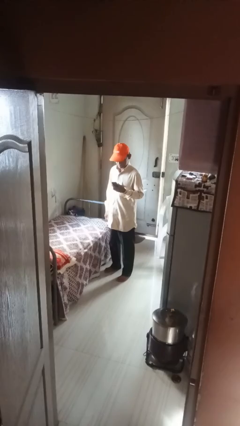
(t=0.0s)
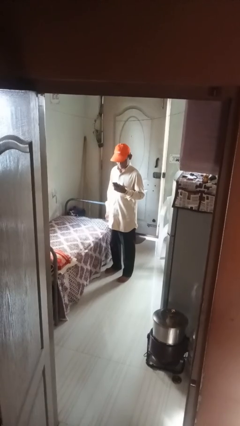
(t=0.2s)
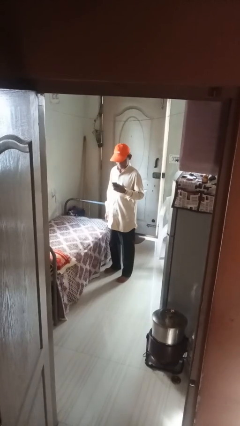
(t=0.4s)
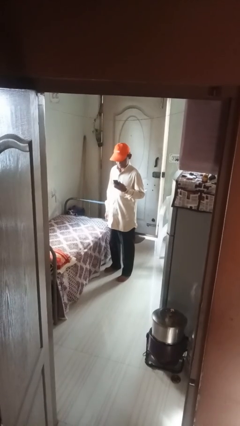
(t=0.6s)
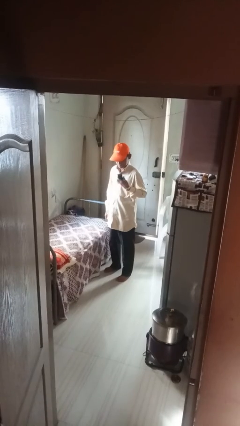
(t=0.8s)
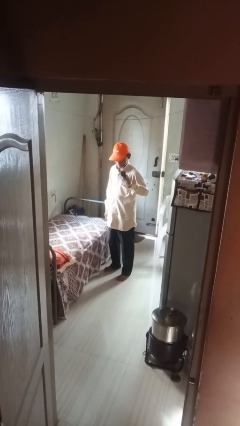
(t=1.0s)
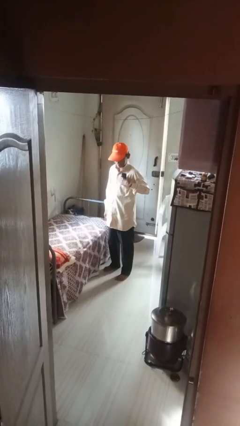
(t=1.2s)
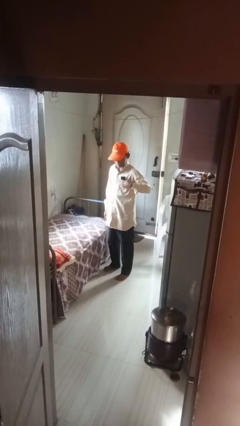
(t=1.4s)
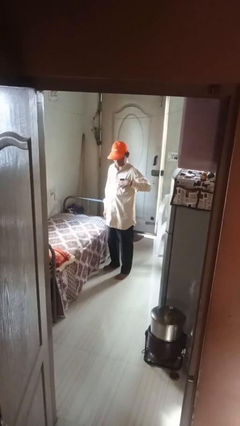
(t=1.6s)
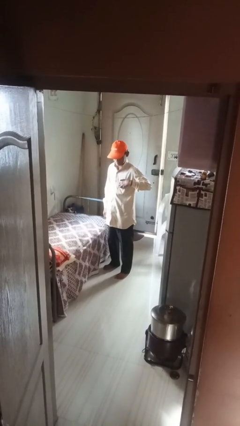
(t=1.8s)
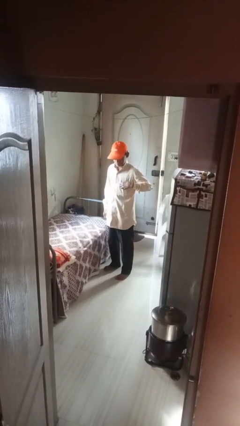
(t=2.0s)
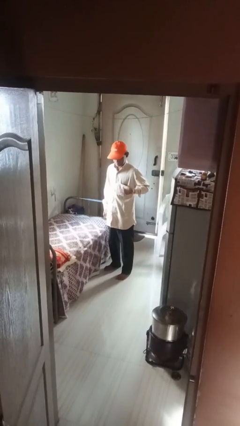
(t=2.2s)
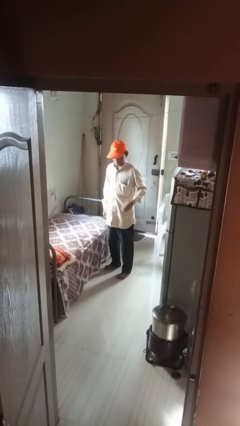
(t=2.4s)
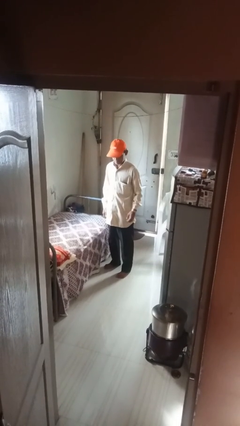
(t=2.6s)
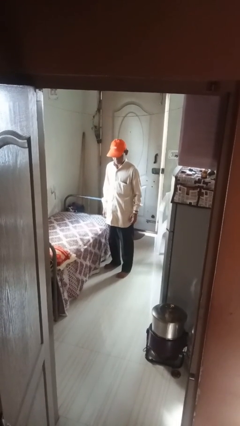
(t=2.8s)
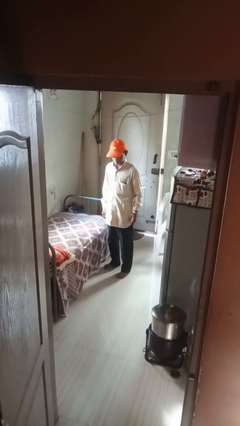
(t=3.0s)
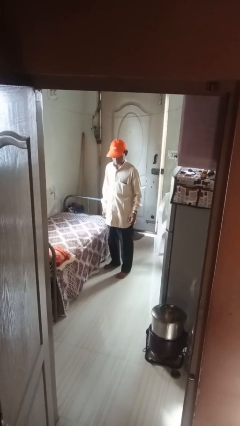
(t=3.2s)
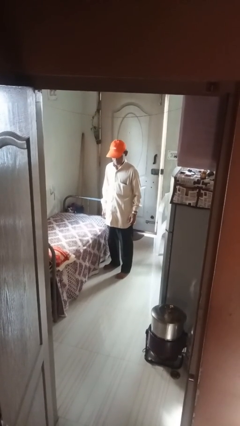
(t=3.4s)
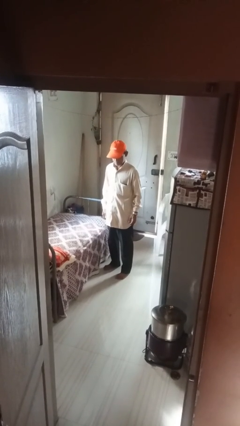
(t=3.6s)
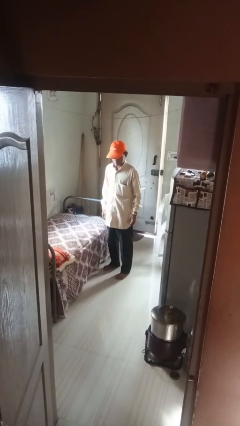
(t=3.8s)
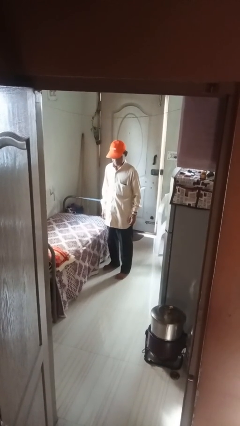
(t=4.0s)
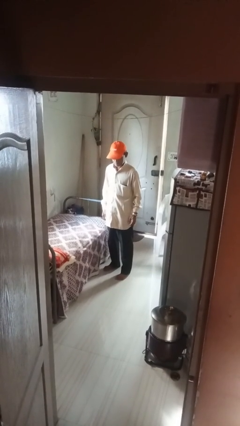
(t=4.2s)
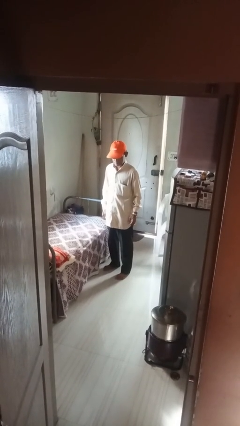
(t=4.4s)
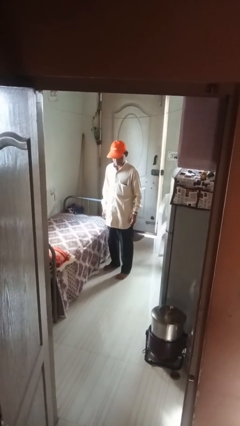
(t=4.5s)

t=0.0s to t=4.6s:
person puts phone into pocket

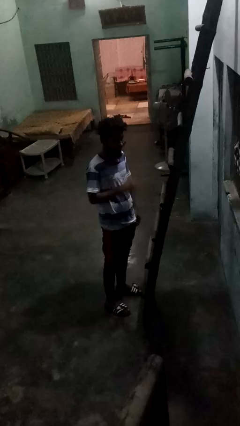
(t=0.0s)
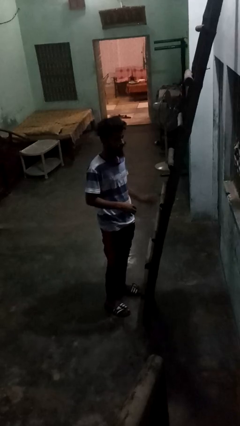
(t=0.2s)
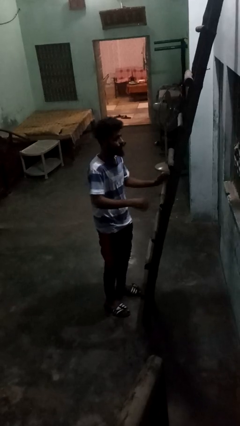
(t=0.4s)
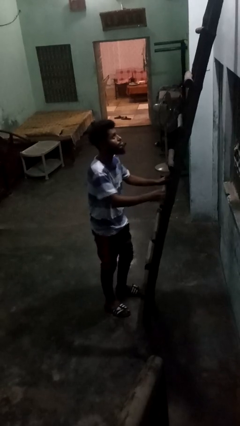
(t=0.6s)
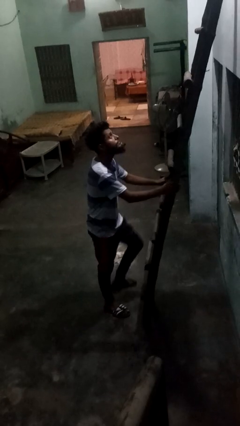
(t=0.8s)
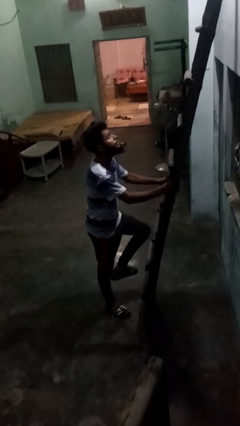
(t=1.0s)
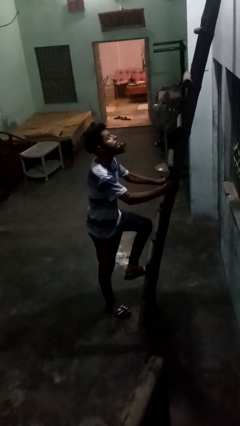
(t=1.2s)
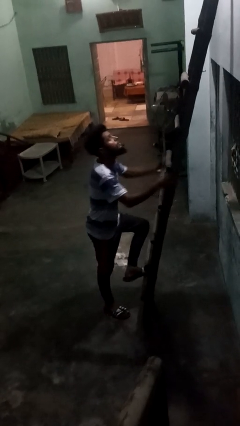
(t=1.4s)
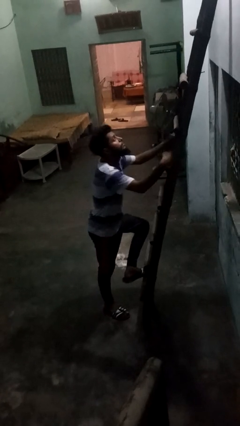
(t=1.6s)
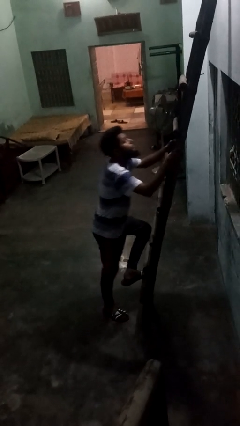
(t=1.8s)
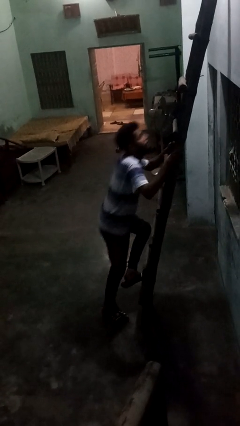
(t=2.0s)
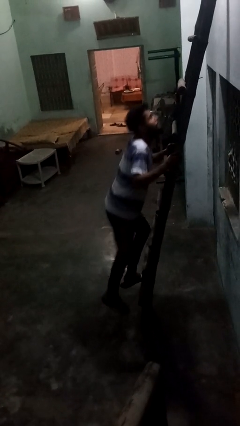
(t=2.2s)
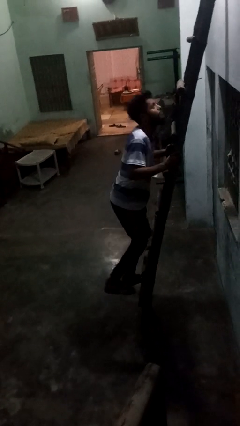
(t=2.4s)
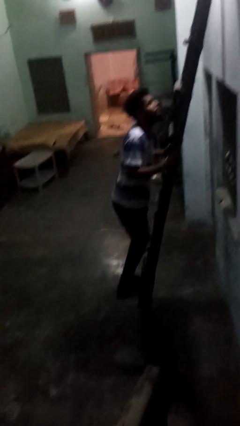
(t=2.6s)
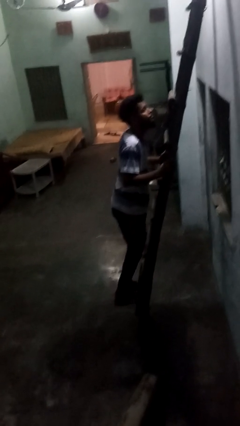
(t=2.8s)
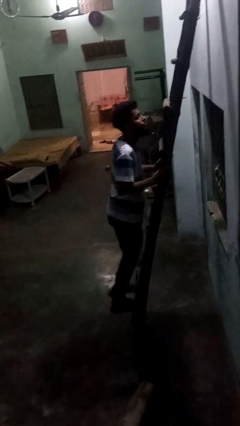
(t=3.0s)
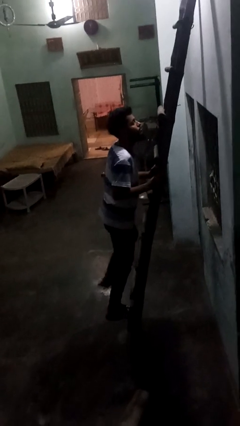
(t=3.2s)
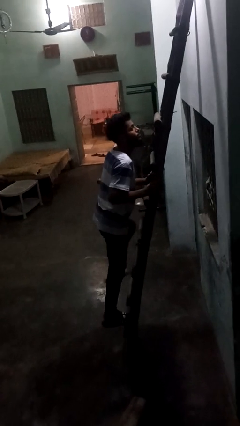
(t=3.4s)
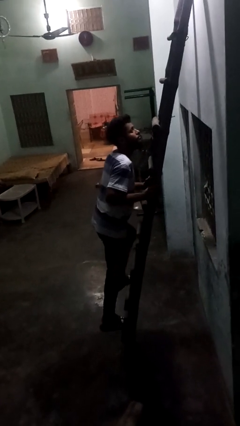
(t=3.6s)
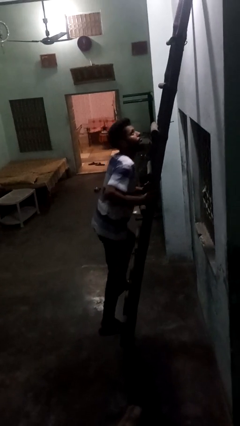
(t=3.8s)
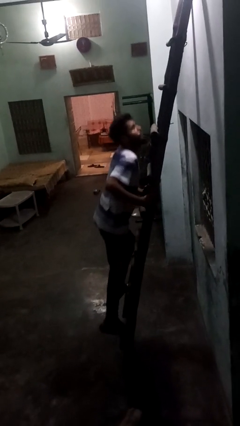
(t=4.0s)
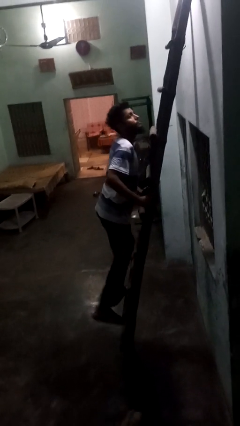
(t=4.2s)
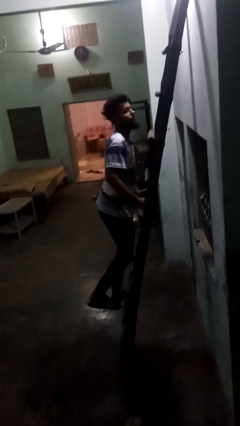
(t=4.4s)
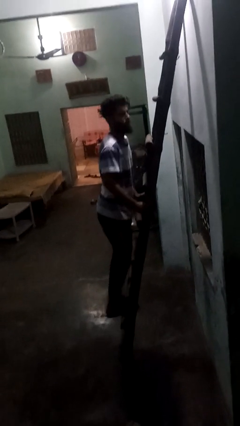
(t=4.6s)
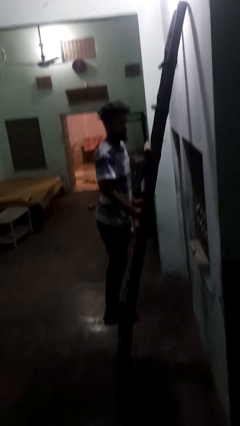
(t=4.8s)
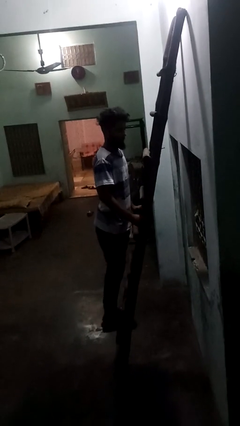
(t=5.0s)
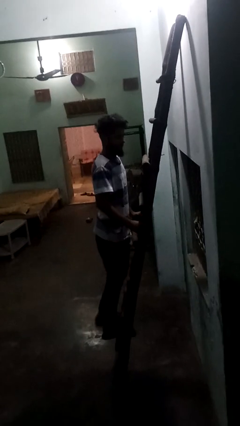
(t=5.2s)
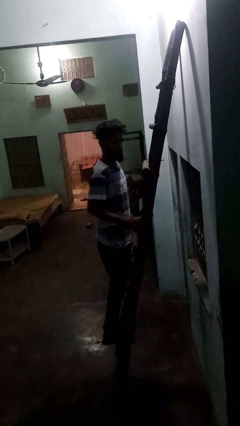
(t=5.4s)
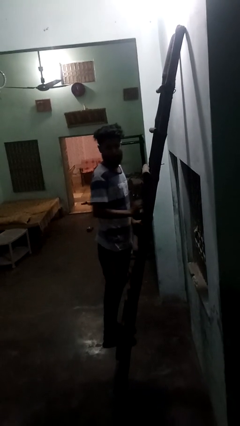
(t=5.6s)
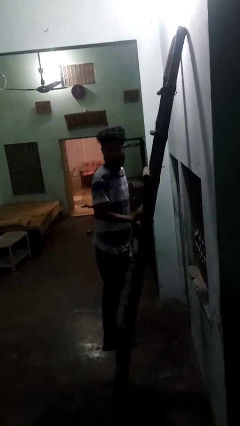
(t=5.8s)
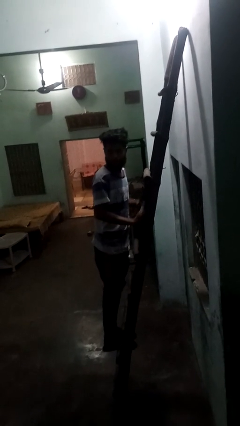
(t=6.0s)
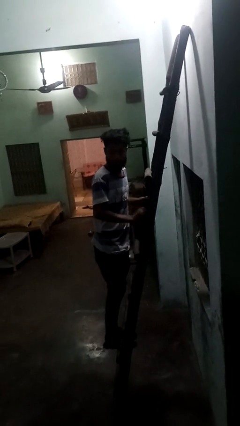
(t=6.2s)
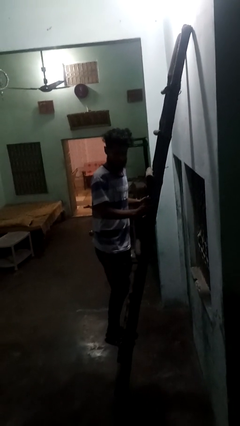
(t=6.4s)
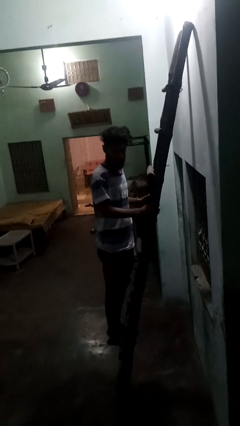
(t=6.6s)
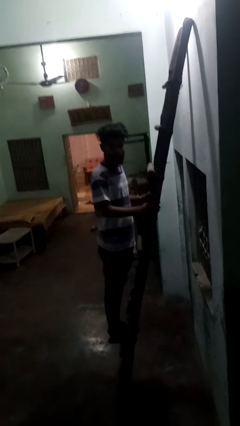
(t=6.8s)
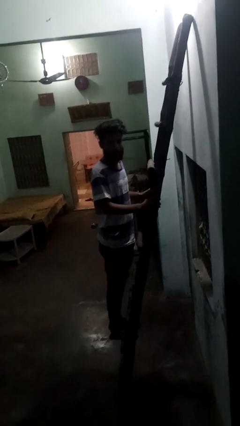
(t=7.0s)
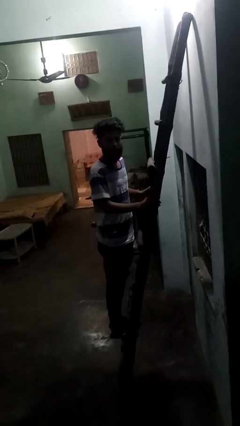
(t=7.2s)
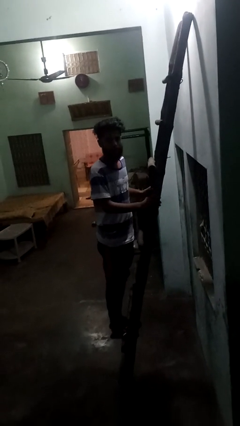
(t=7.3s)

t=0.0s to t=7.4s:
person climbs up ladder

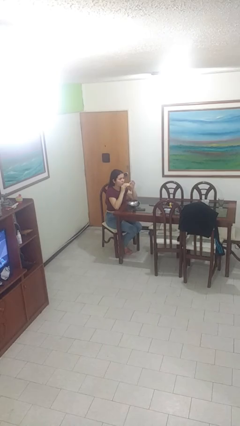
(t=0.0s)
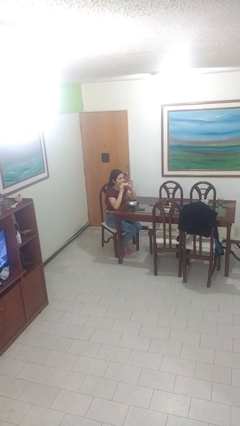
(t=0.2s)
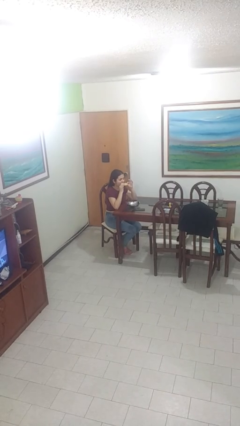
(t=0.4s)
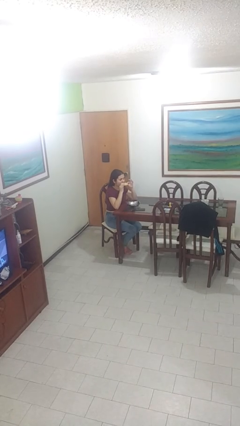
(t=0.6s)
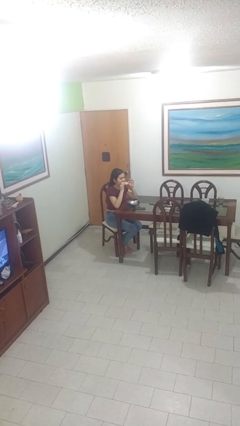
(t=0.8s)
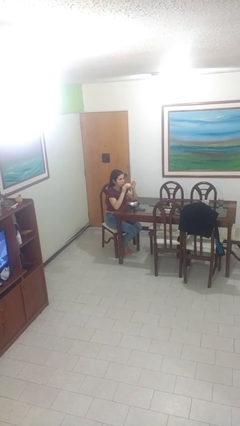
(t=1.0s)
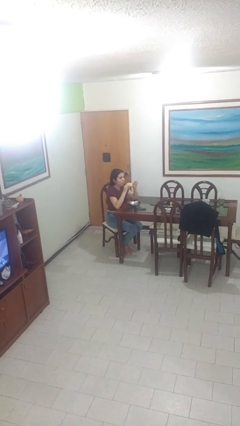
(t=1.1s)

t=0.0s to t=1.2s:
person eats with hands

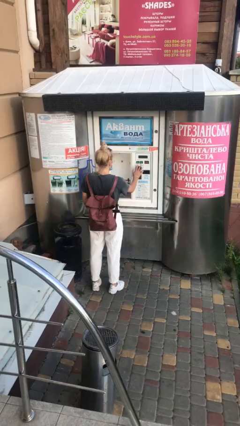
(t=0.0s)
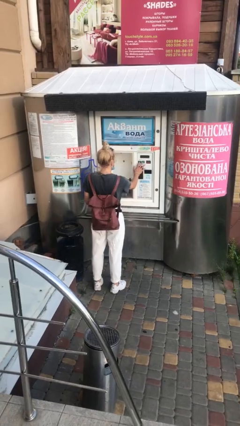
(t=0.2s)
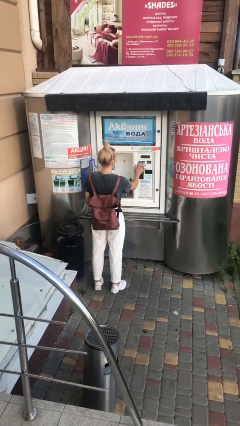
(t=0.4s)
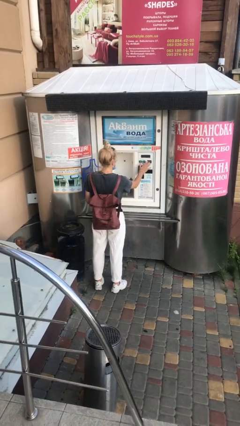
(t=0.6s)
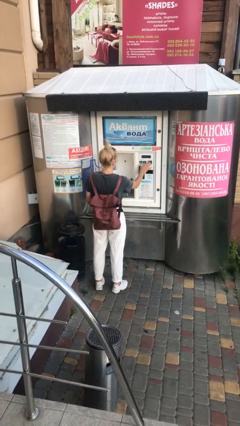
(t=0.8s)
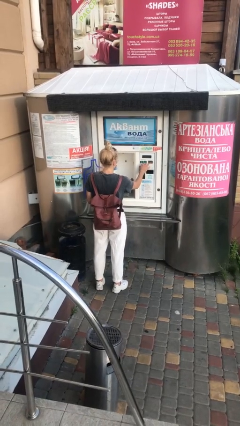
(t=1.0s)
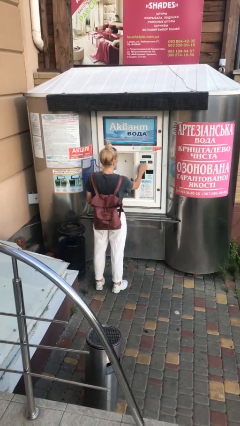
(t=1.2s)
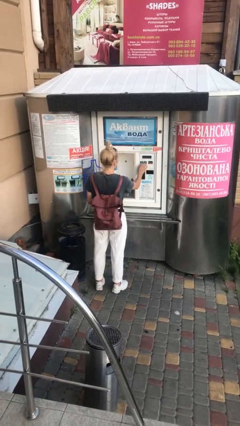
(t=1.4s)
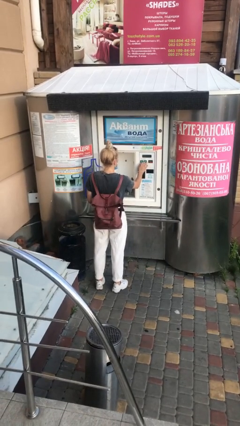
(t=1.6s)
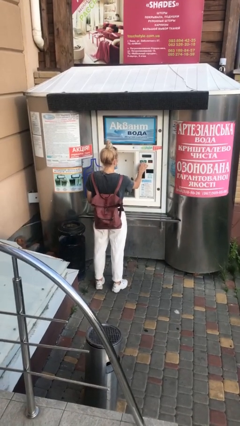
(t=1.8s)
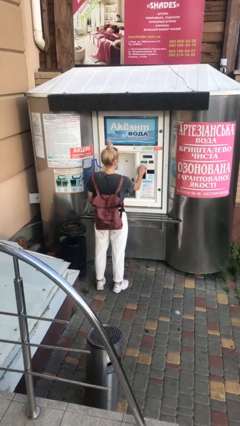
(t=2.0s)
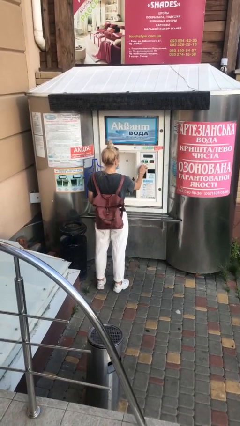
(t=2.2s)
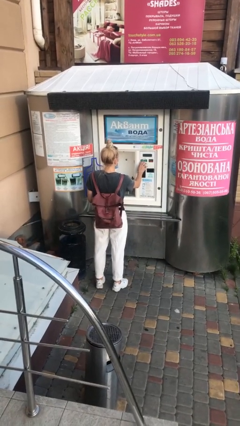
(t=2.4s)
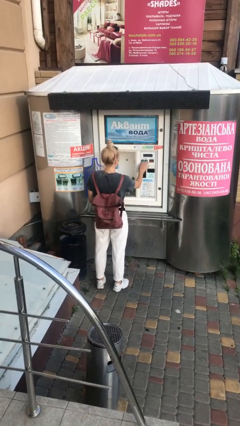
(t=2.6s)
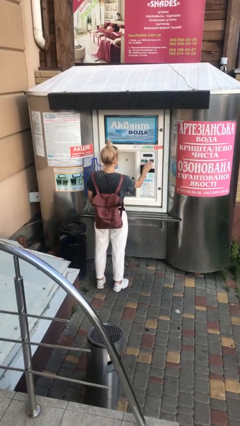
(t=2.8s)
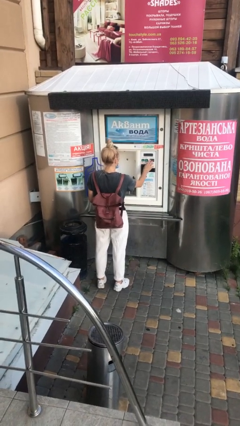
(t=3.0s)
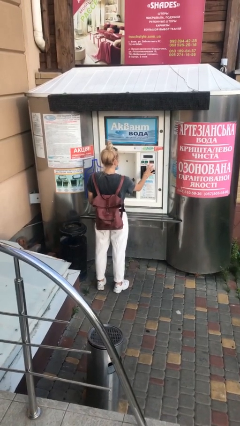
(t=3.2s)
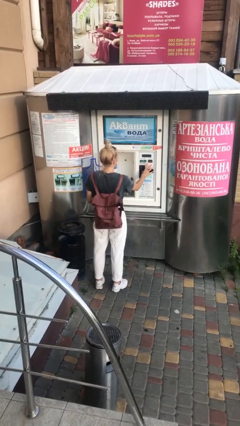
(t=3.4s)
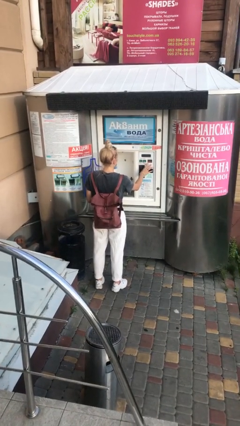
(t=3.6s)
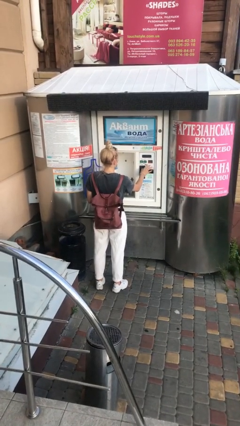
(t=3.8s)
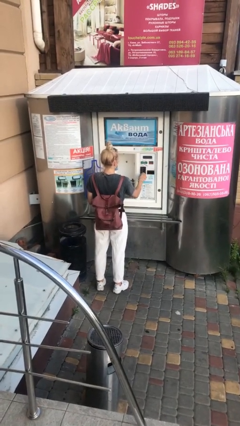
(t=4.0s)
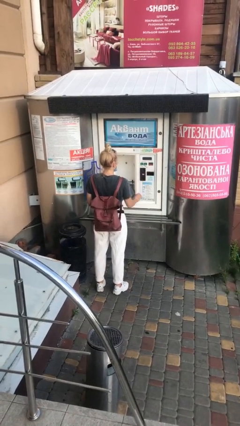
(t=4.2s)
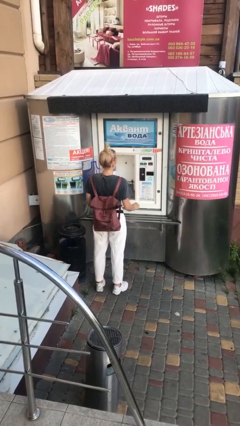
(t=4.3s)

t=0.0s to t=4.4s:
person purchases from machine

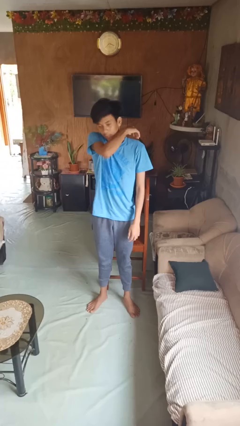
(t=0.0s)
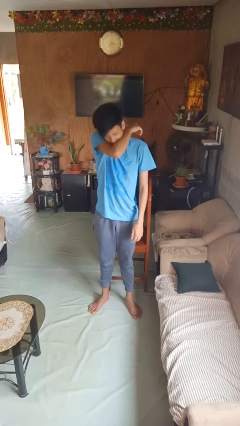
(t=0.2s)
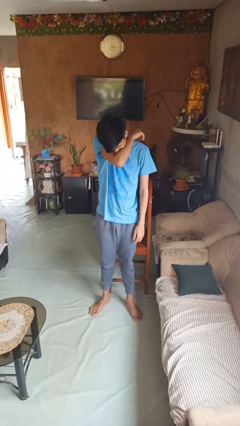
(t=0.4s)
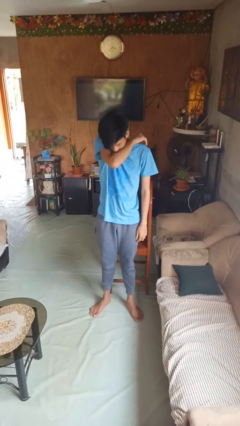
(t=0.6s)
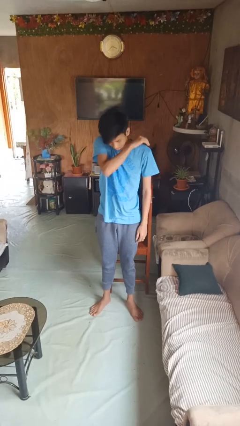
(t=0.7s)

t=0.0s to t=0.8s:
person sneezes into arm
